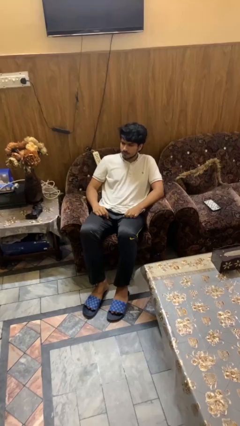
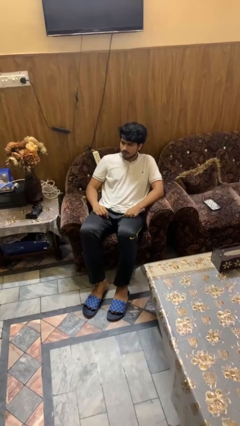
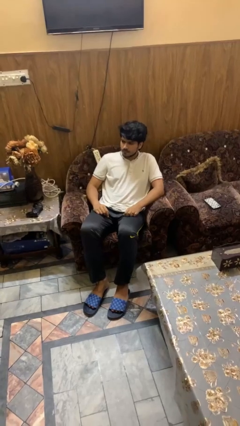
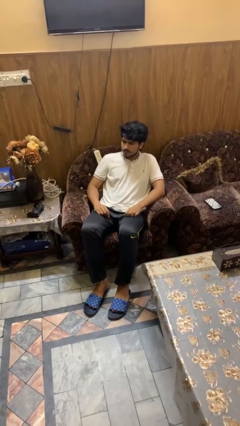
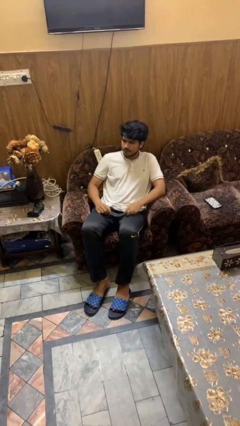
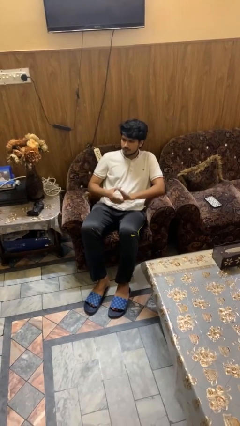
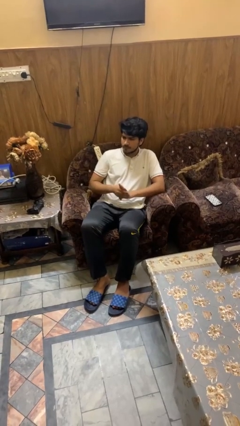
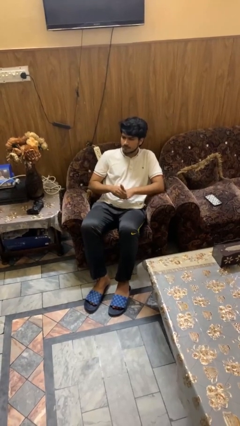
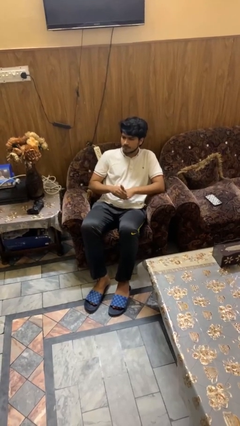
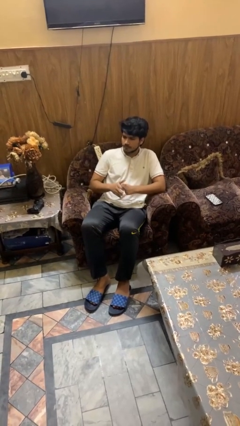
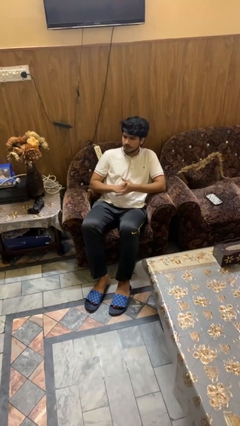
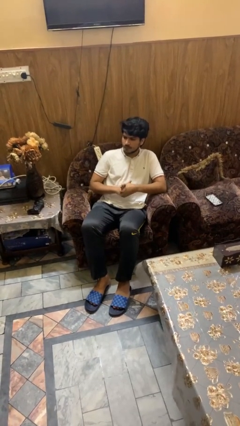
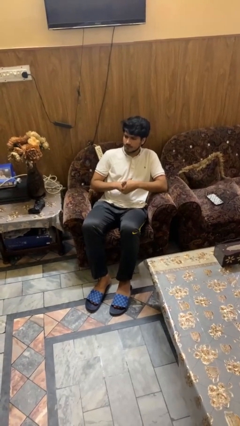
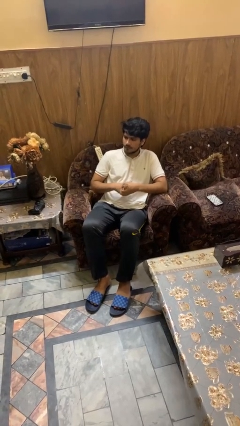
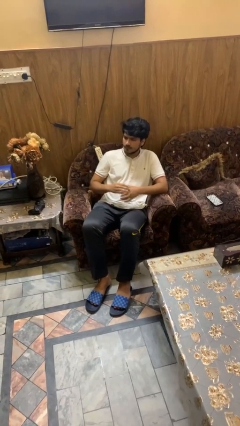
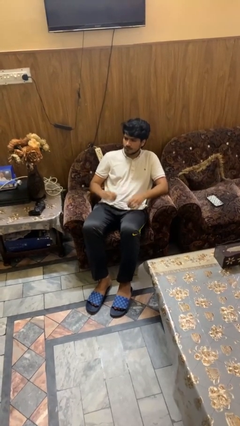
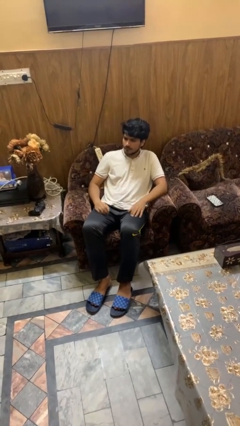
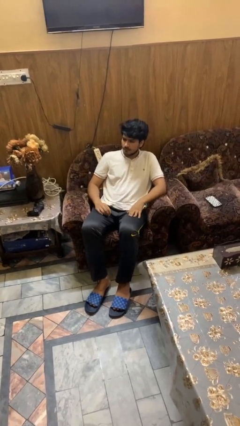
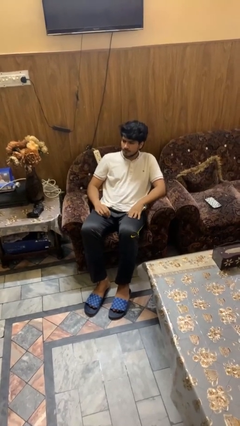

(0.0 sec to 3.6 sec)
person cracks knuckles

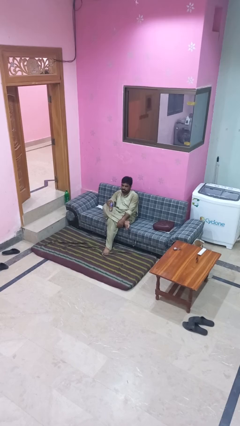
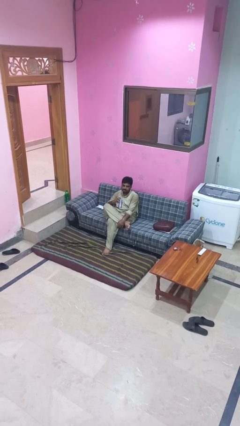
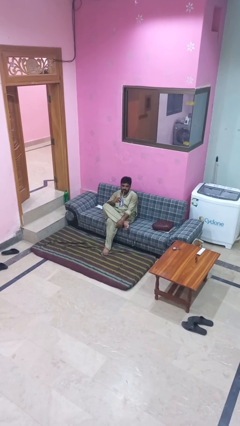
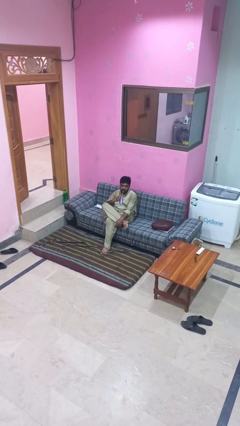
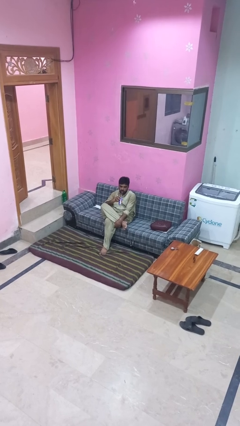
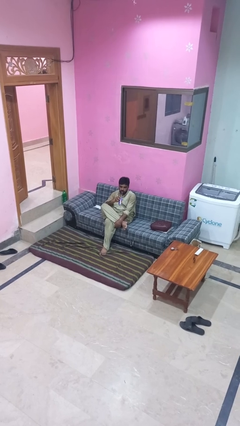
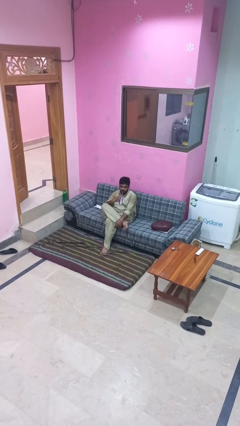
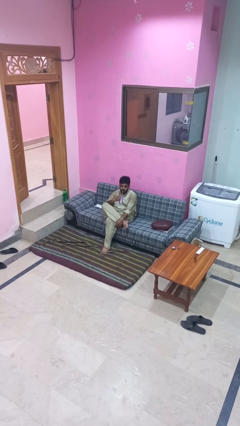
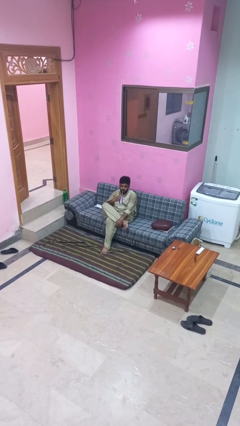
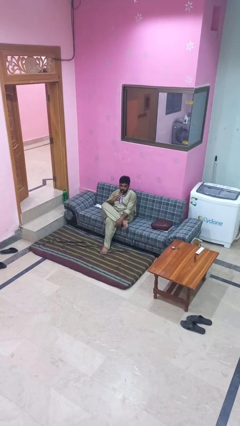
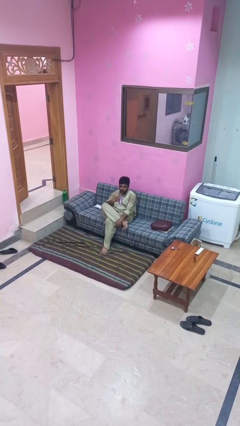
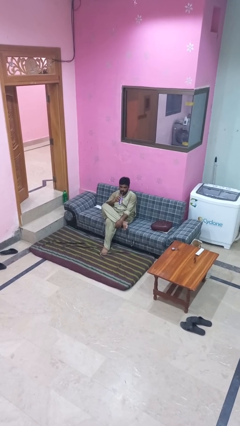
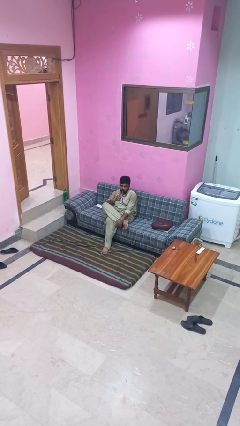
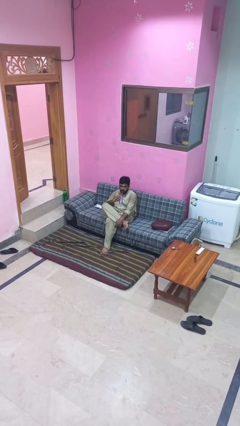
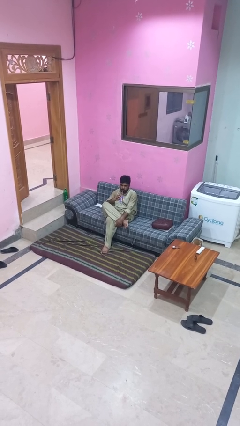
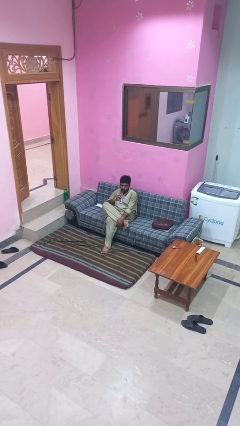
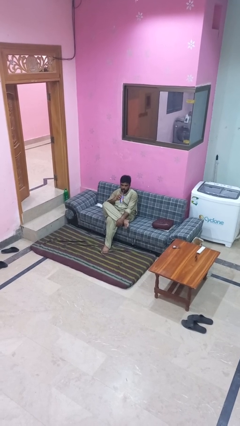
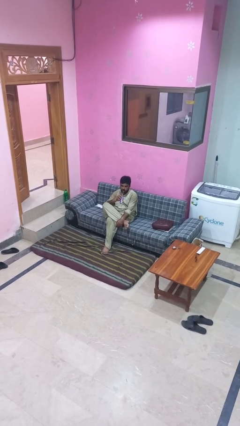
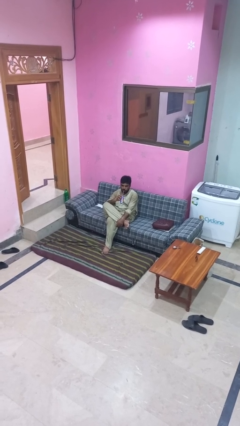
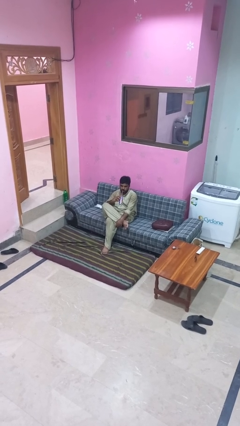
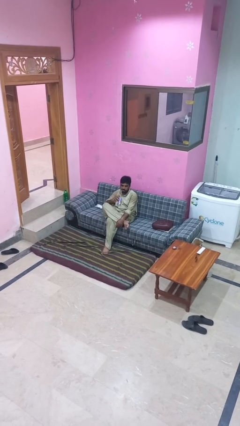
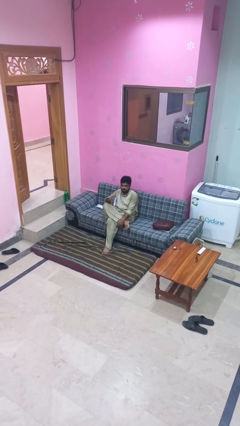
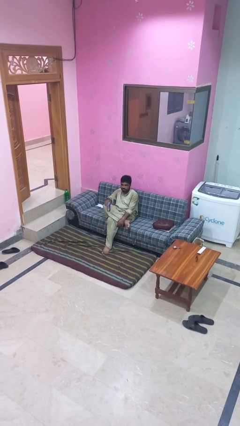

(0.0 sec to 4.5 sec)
person drinks from straw

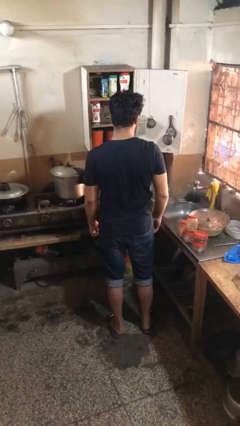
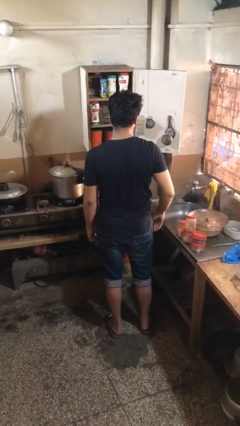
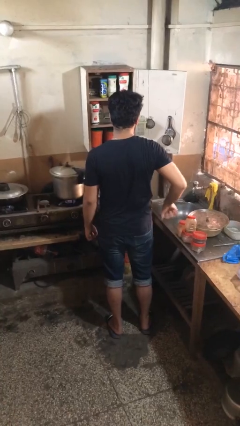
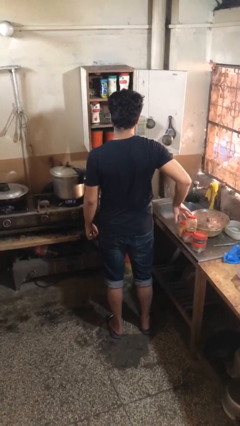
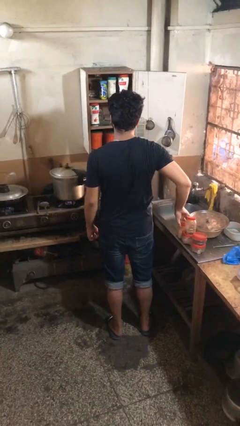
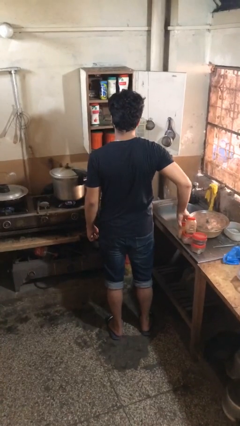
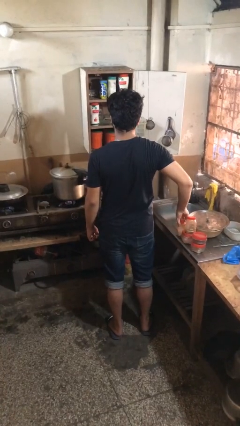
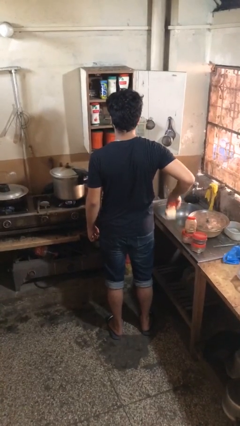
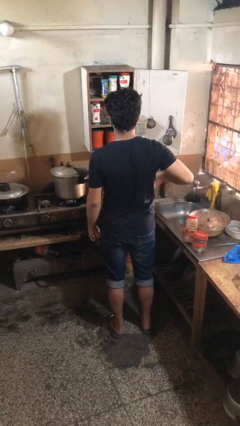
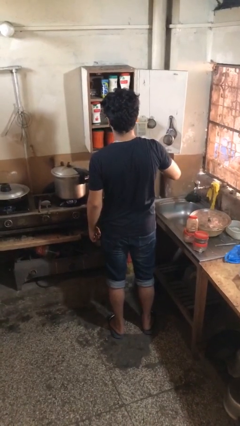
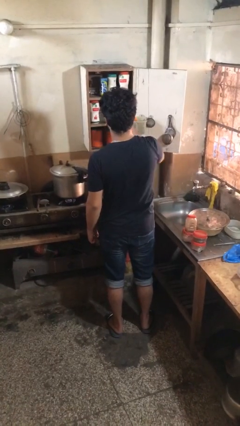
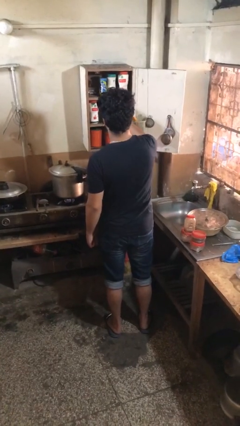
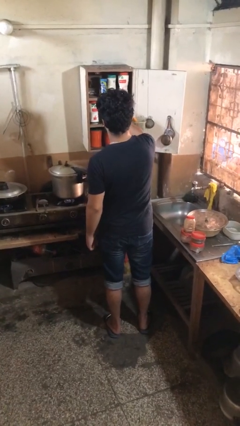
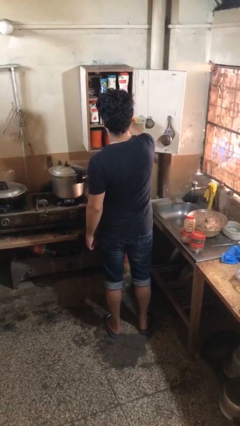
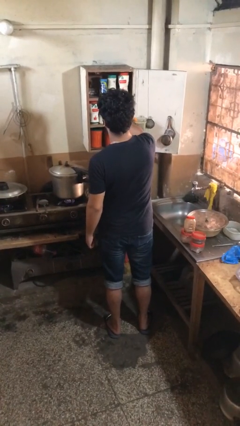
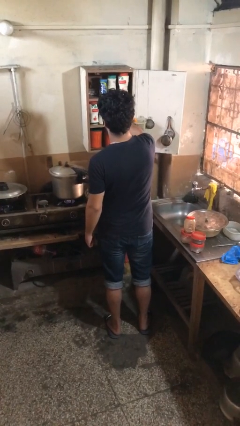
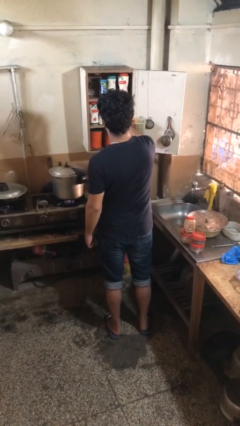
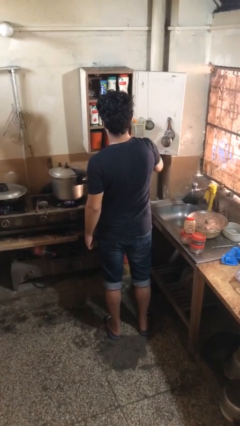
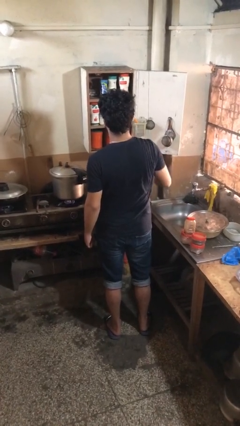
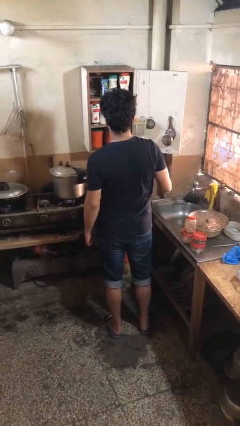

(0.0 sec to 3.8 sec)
person loads groceries into cabinet

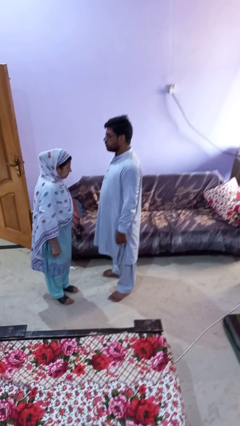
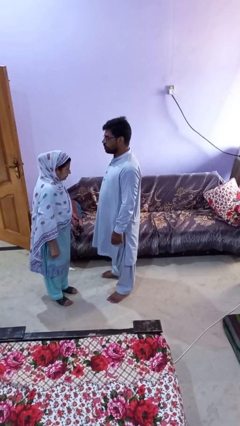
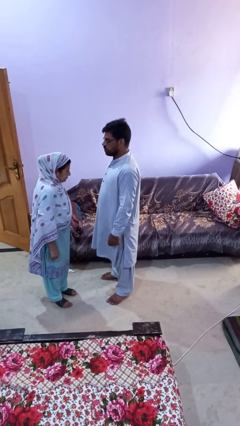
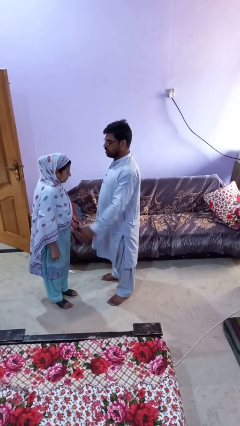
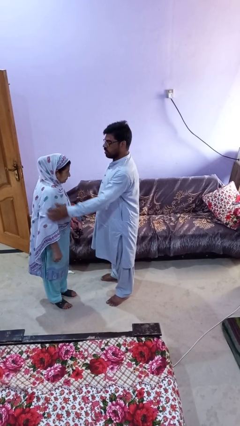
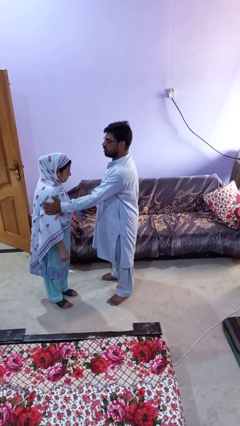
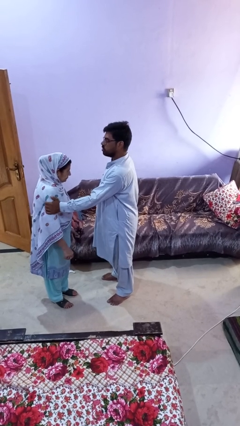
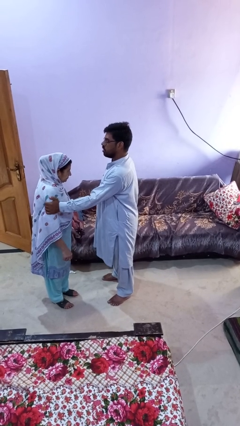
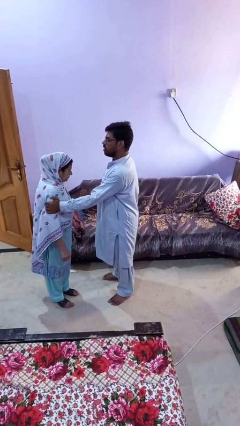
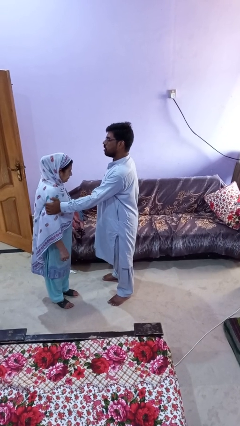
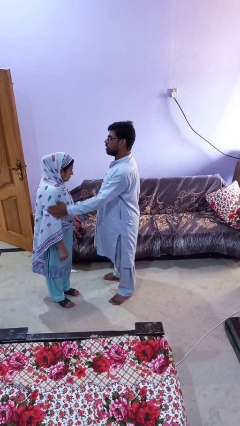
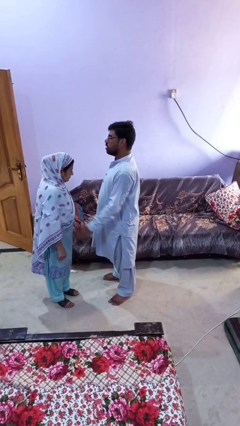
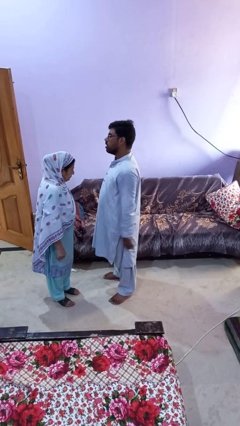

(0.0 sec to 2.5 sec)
person grabs person by bicep

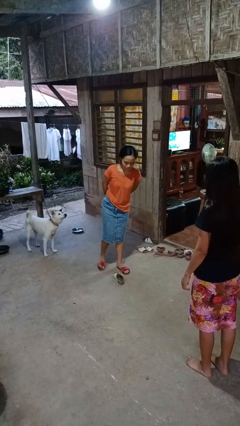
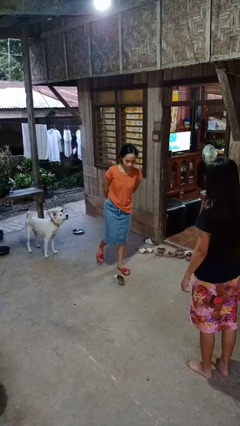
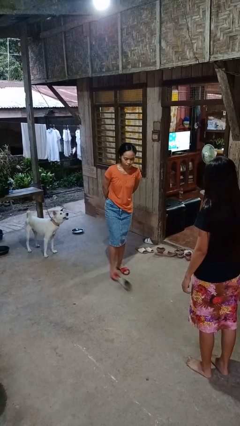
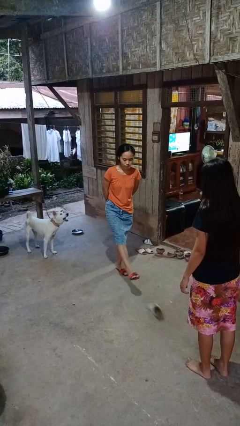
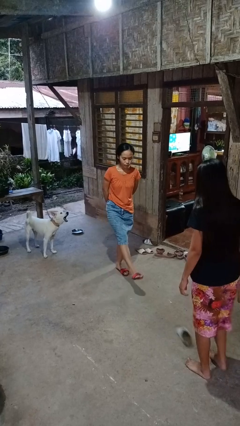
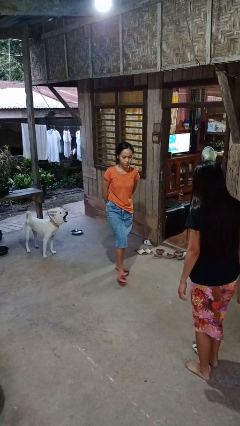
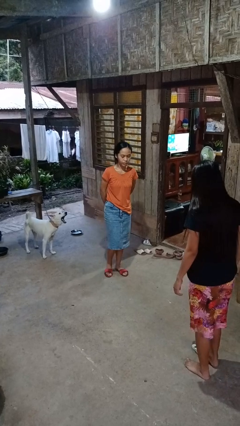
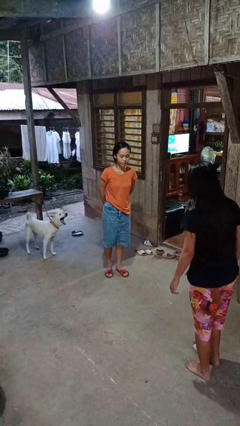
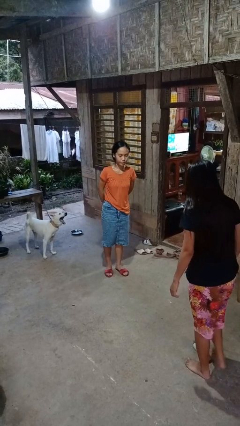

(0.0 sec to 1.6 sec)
person kicks object to person

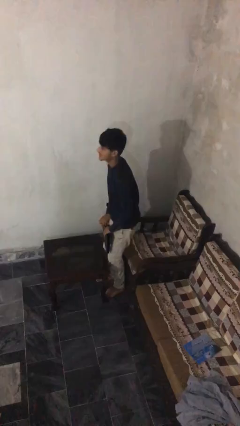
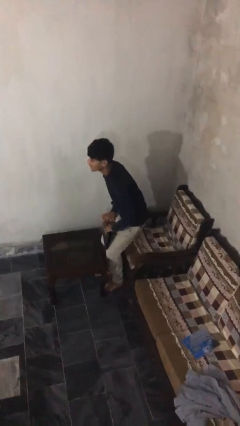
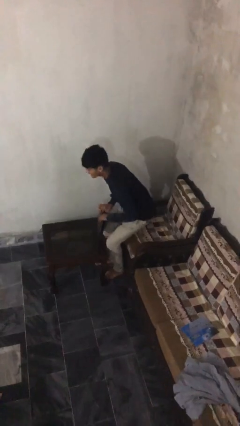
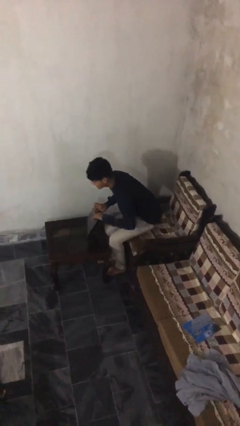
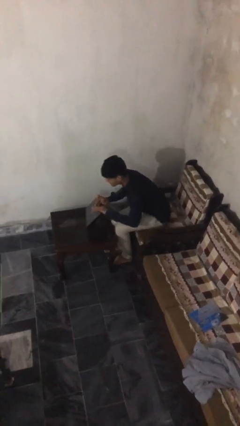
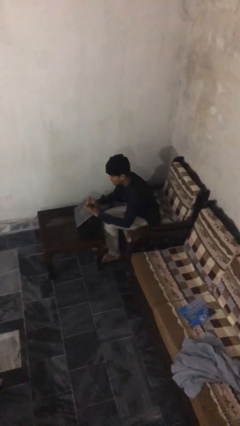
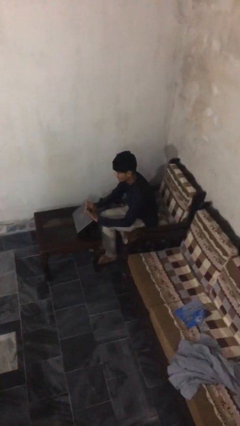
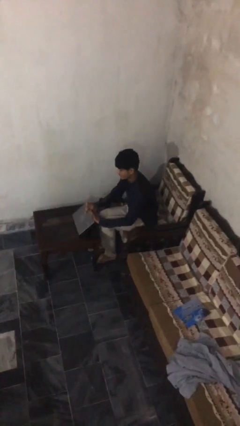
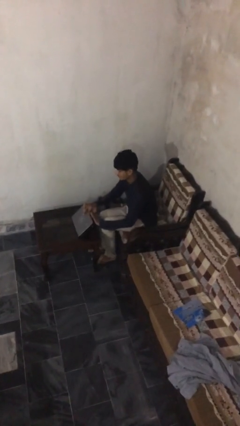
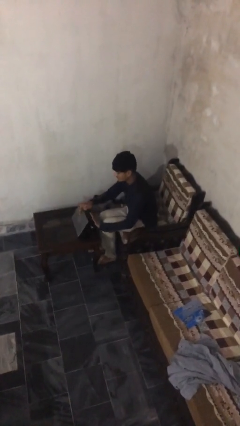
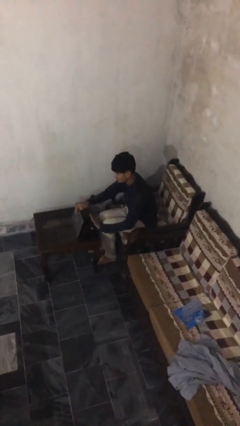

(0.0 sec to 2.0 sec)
person sits down
